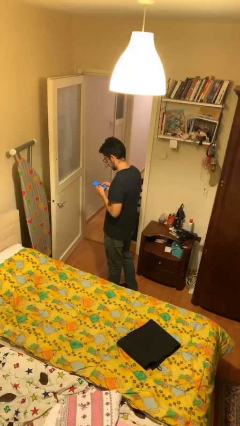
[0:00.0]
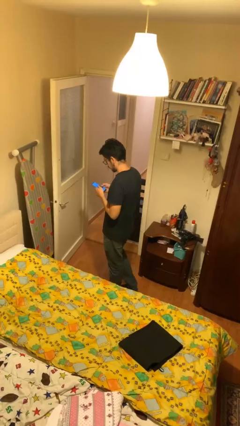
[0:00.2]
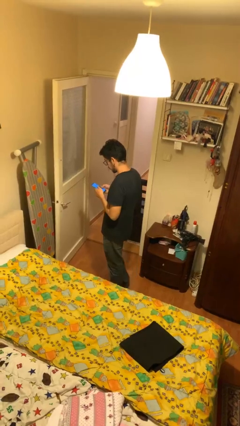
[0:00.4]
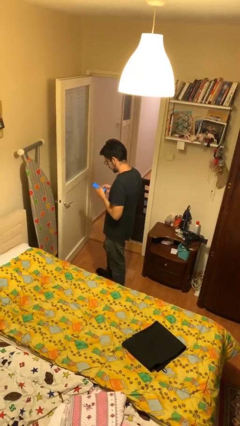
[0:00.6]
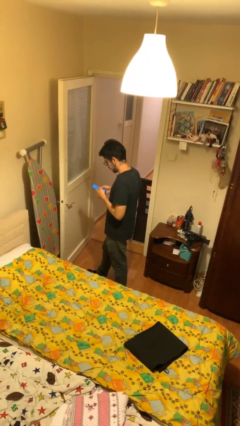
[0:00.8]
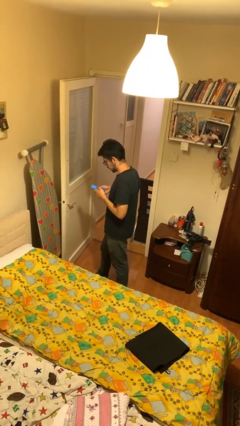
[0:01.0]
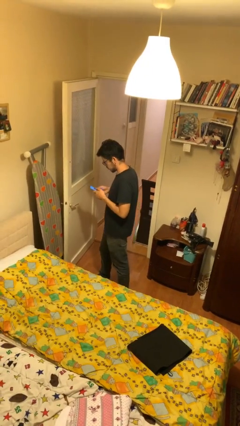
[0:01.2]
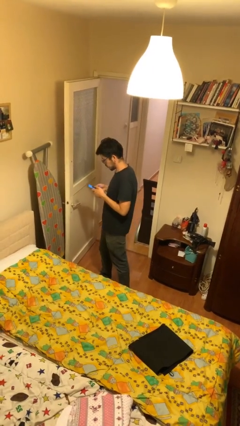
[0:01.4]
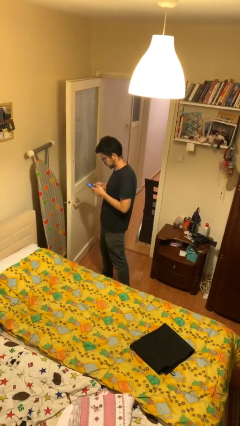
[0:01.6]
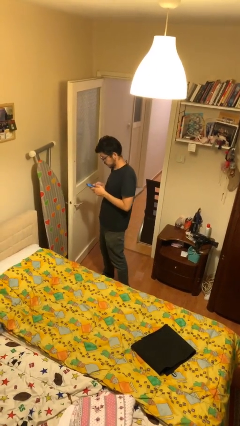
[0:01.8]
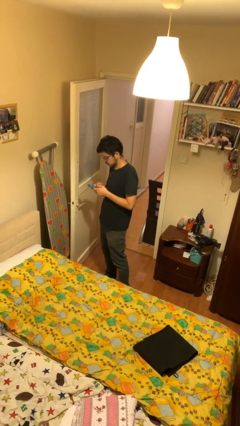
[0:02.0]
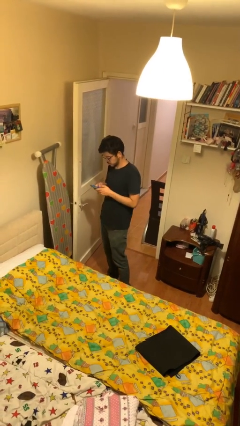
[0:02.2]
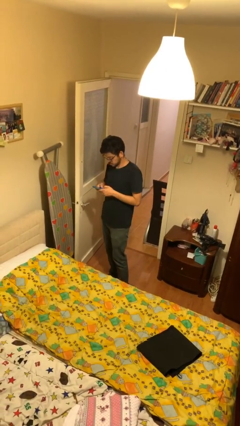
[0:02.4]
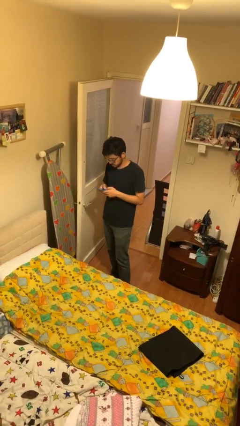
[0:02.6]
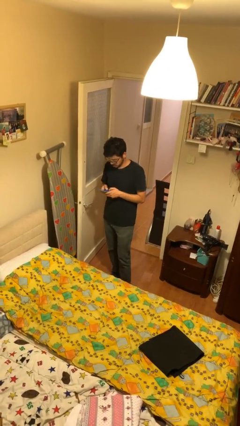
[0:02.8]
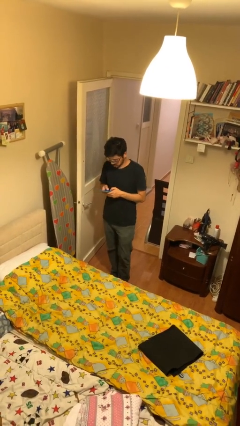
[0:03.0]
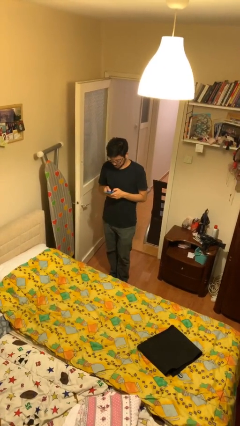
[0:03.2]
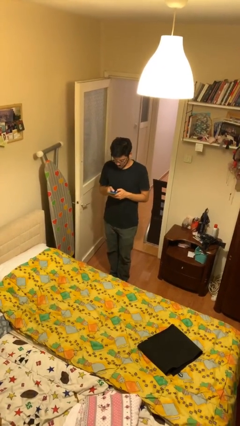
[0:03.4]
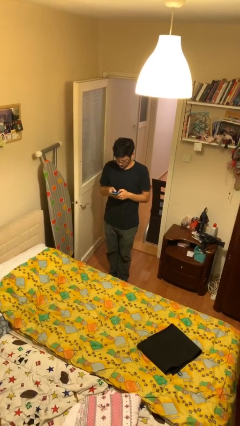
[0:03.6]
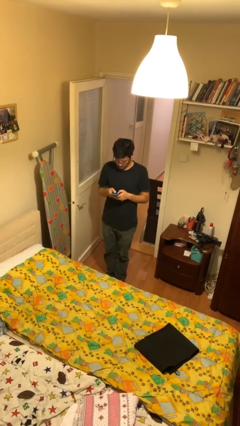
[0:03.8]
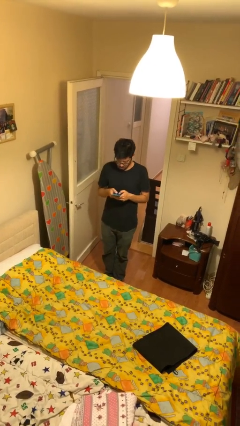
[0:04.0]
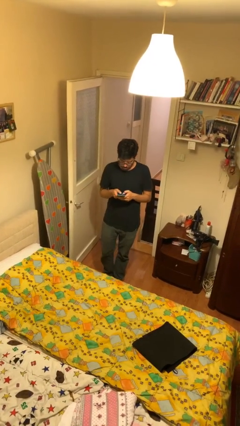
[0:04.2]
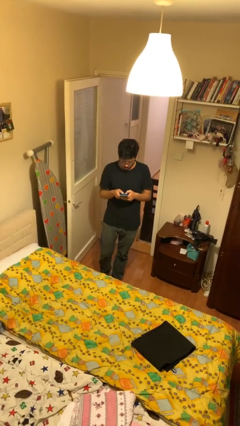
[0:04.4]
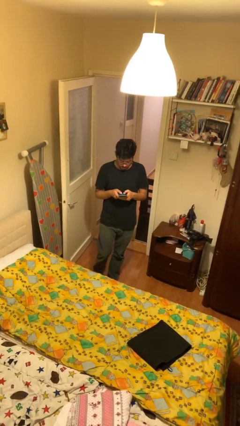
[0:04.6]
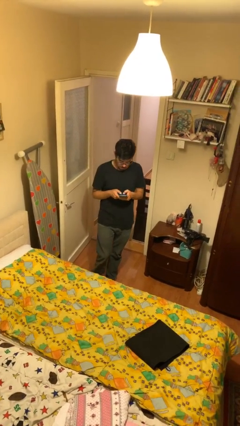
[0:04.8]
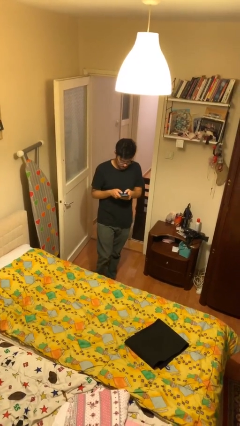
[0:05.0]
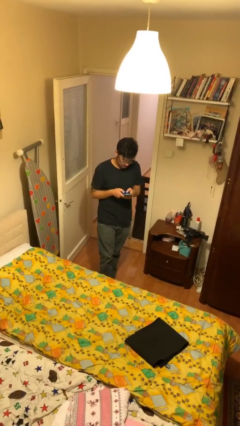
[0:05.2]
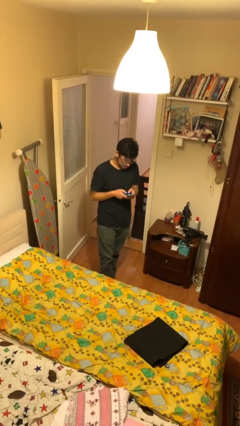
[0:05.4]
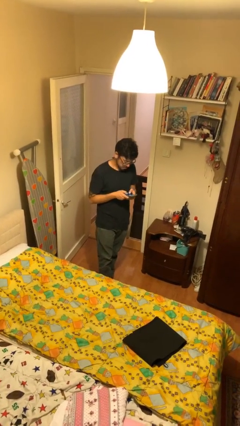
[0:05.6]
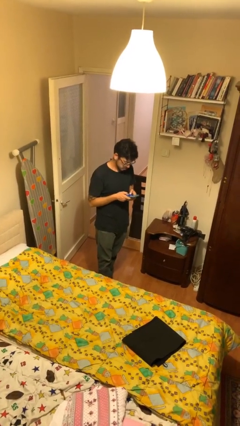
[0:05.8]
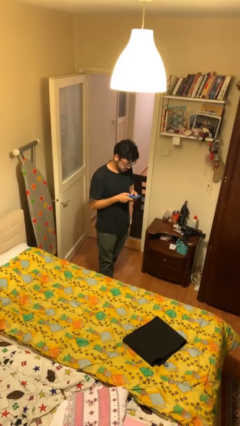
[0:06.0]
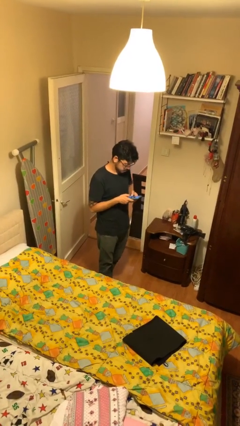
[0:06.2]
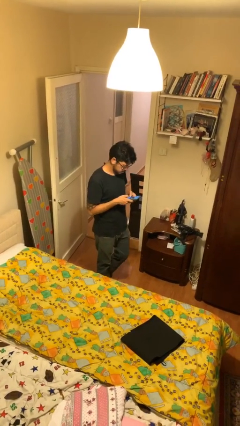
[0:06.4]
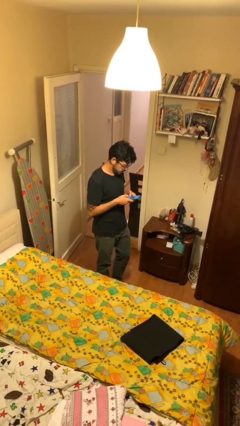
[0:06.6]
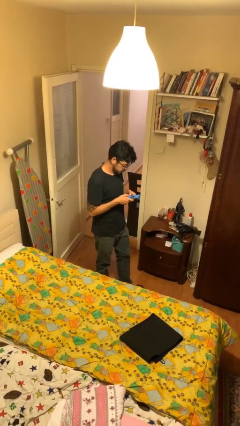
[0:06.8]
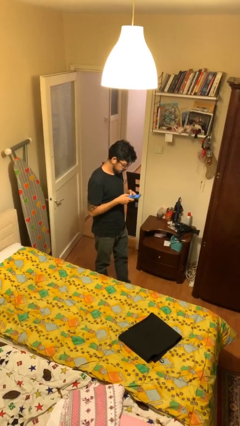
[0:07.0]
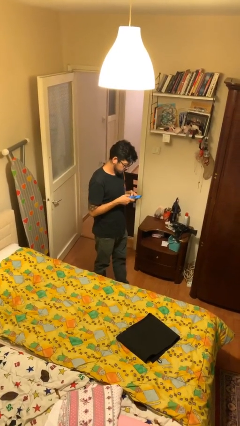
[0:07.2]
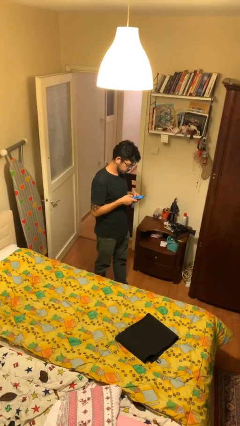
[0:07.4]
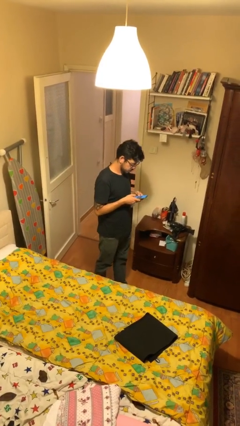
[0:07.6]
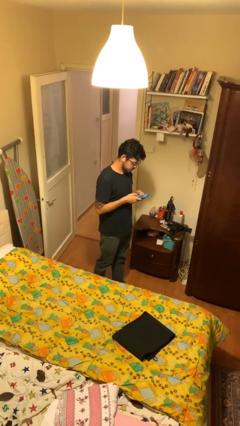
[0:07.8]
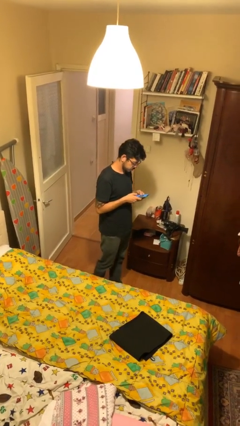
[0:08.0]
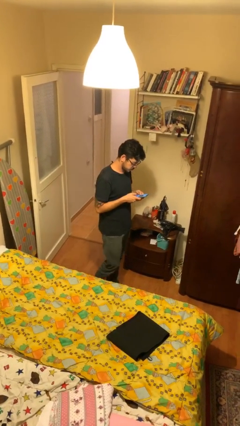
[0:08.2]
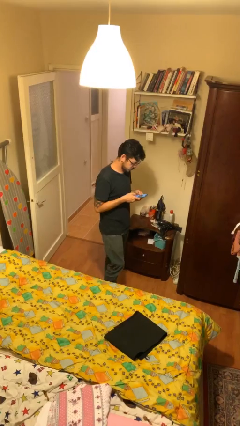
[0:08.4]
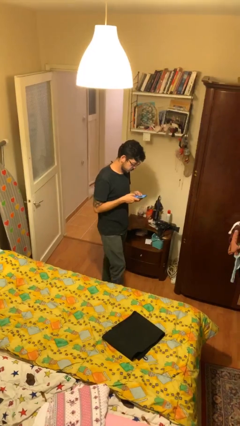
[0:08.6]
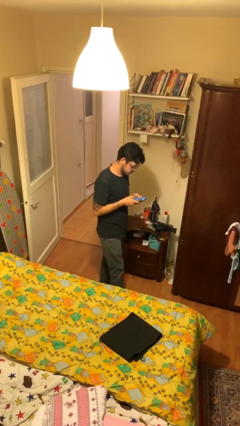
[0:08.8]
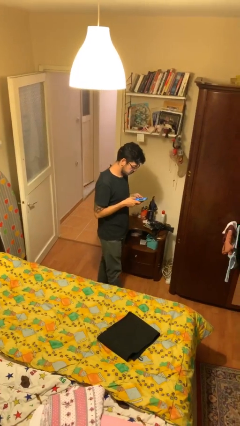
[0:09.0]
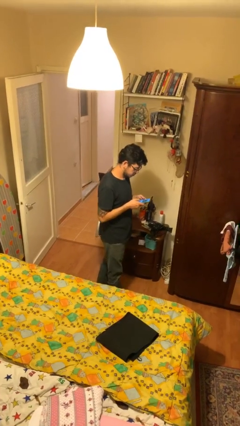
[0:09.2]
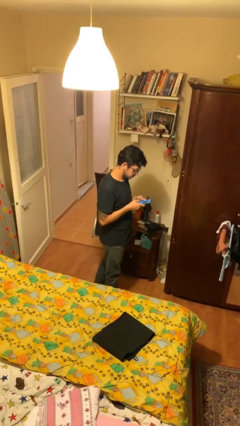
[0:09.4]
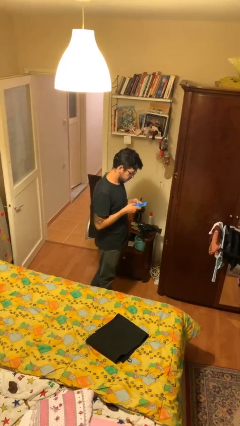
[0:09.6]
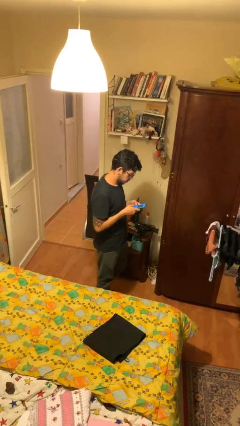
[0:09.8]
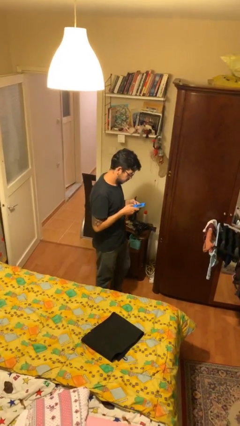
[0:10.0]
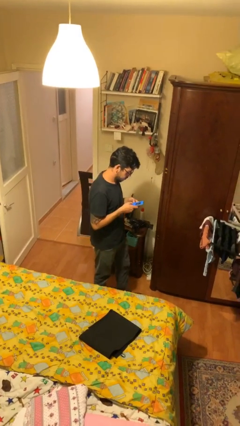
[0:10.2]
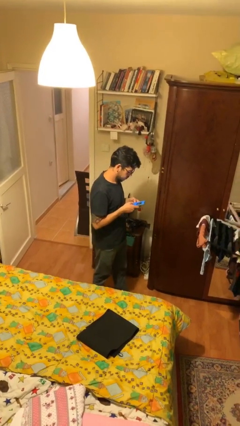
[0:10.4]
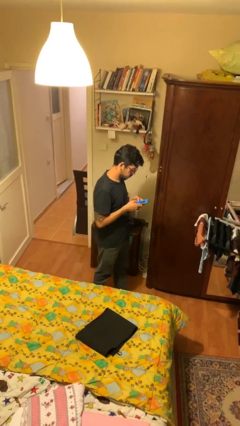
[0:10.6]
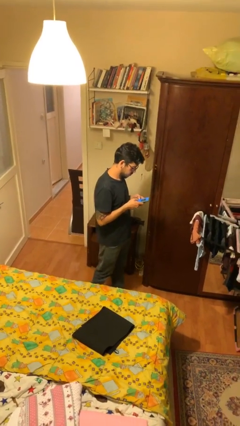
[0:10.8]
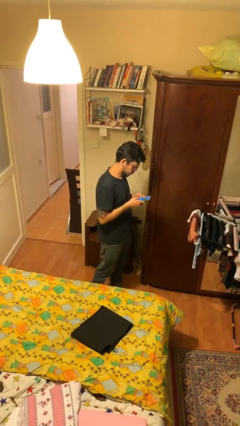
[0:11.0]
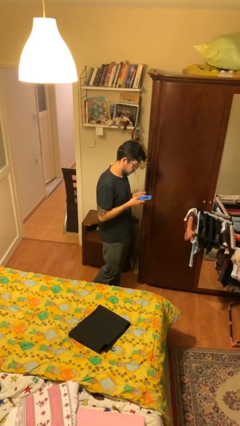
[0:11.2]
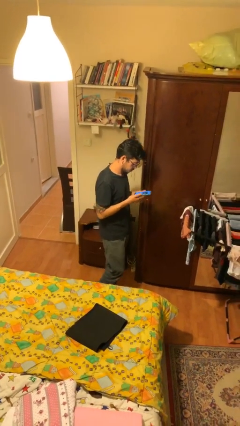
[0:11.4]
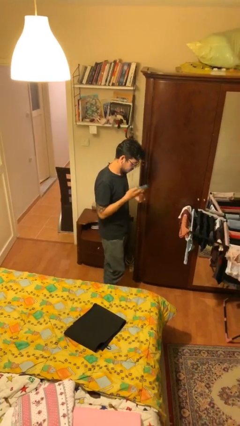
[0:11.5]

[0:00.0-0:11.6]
person texts on phone

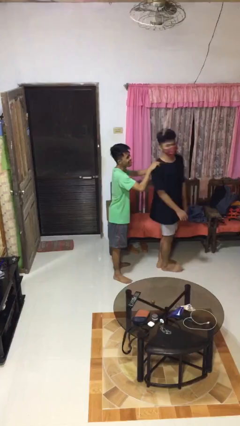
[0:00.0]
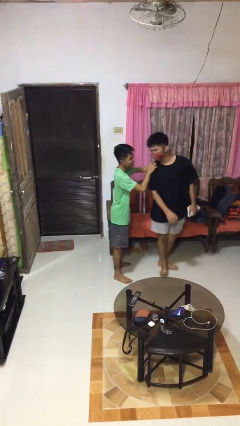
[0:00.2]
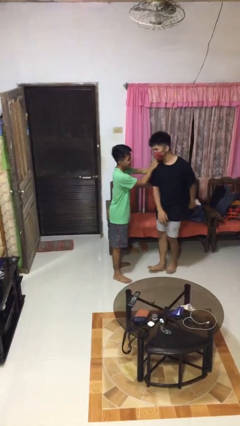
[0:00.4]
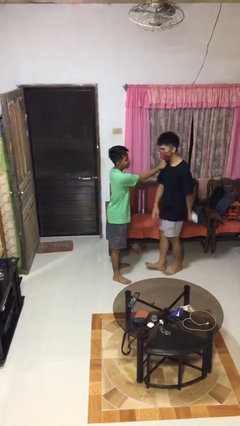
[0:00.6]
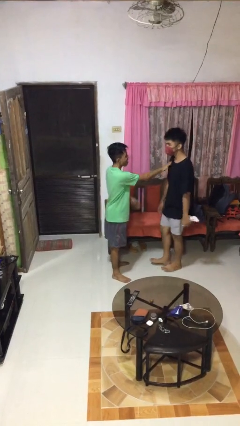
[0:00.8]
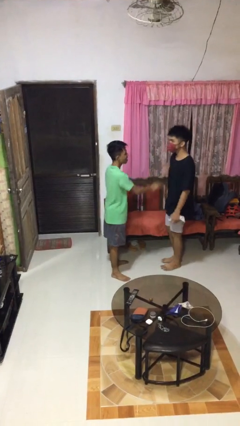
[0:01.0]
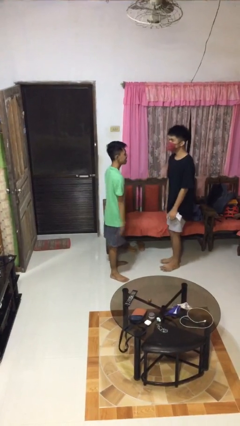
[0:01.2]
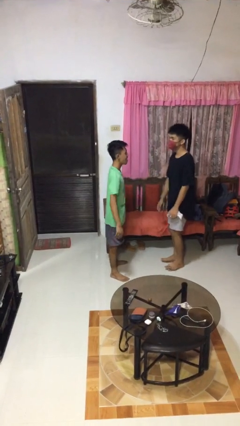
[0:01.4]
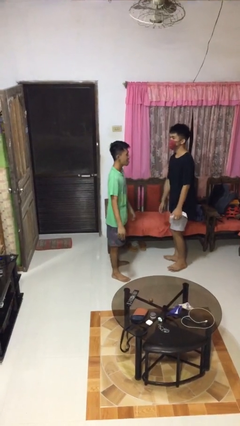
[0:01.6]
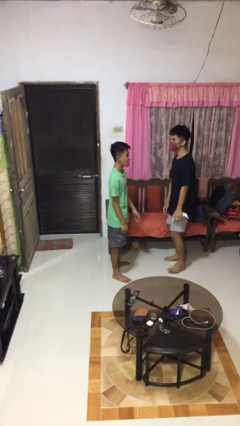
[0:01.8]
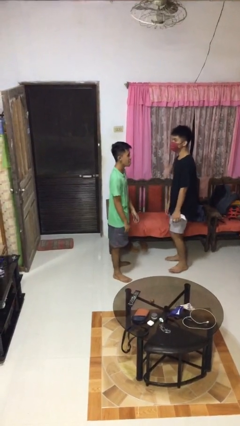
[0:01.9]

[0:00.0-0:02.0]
person spins person around

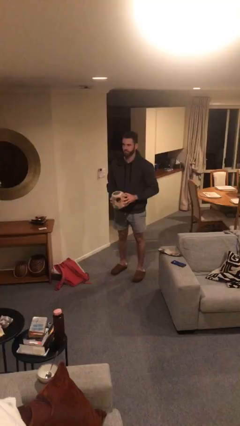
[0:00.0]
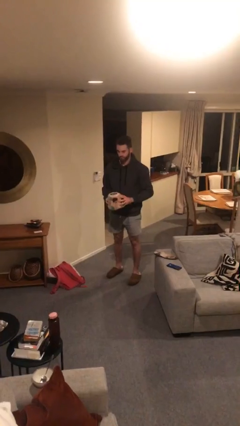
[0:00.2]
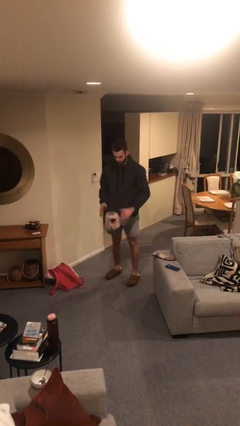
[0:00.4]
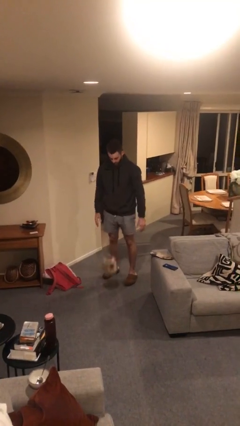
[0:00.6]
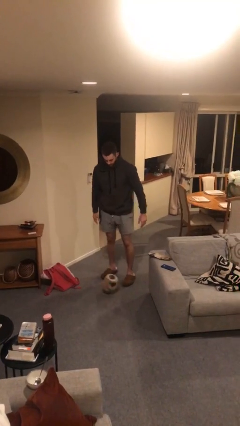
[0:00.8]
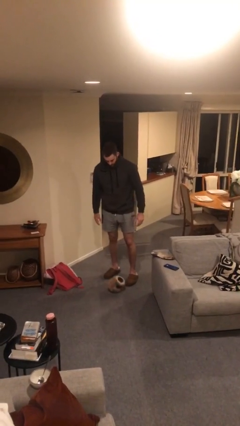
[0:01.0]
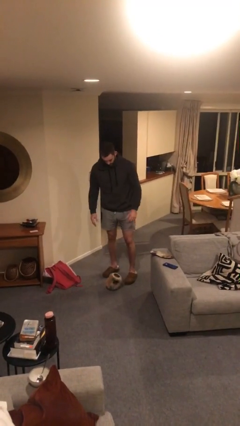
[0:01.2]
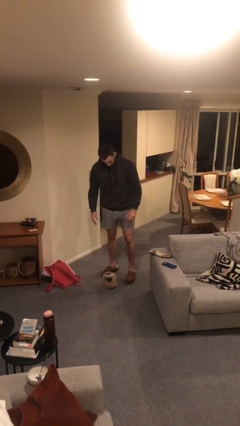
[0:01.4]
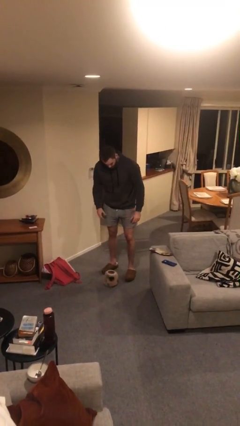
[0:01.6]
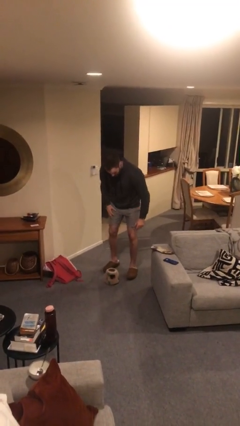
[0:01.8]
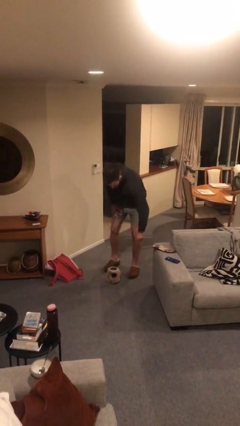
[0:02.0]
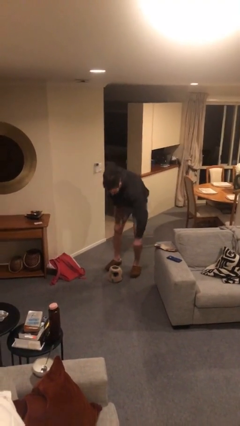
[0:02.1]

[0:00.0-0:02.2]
person drops object

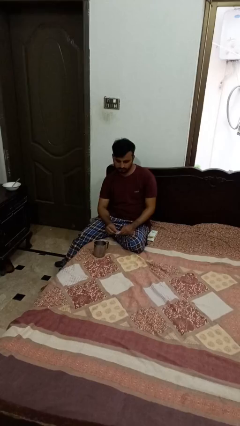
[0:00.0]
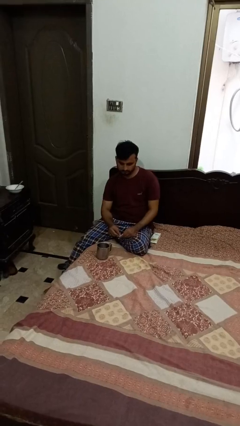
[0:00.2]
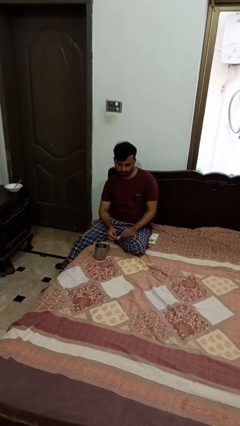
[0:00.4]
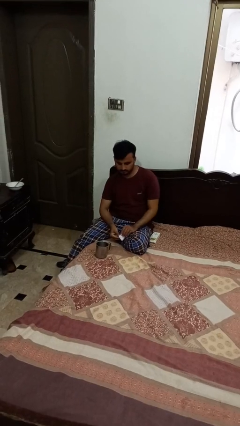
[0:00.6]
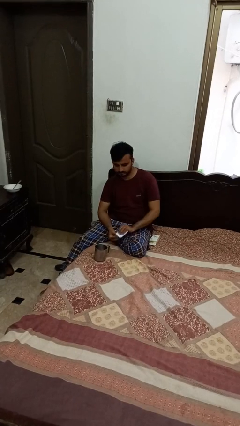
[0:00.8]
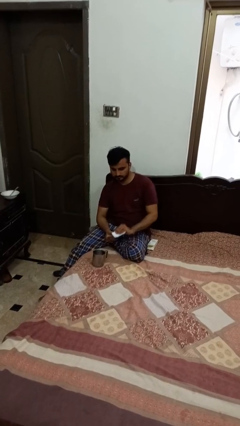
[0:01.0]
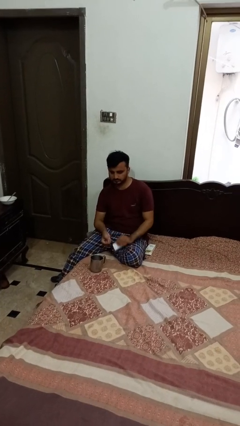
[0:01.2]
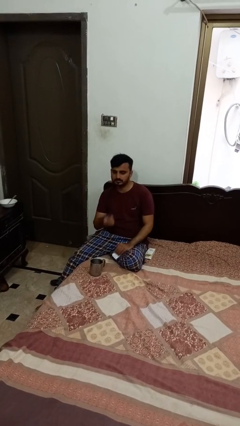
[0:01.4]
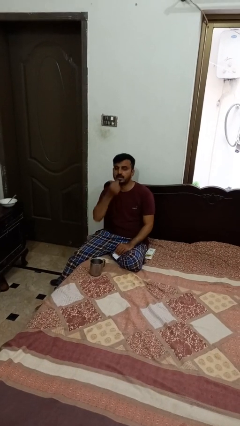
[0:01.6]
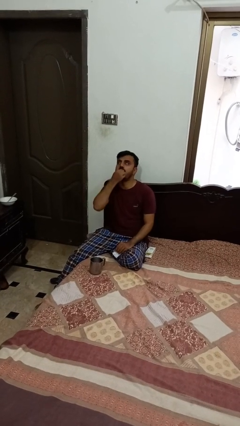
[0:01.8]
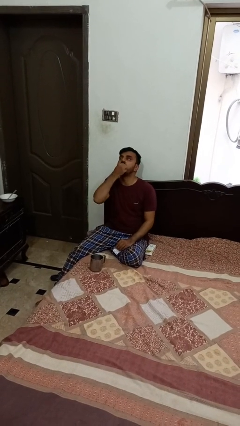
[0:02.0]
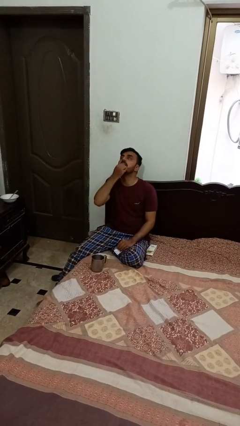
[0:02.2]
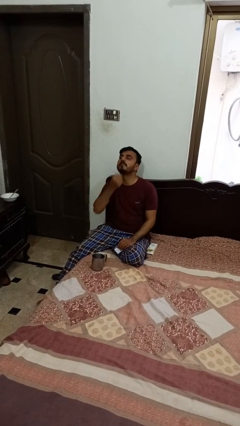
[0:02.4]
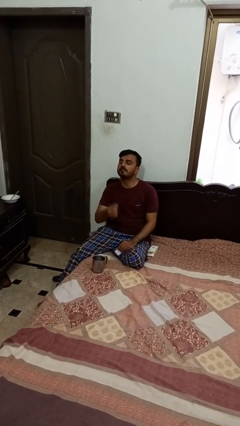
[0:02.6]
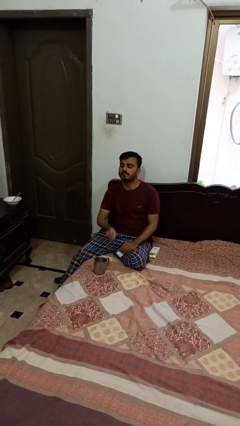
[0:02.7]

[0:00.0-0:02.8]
person takes medicine pills
